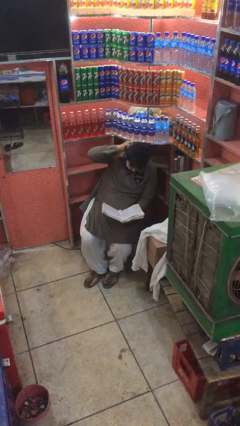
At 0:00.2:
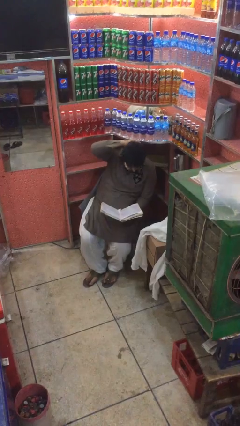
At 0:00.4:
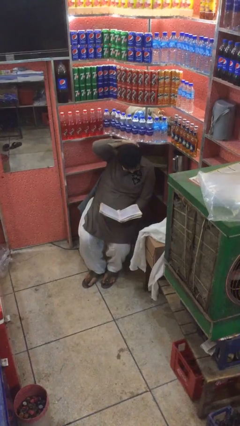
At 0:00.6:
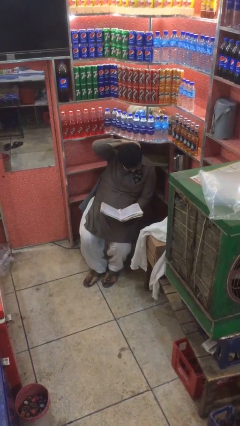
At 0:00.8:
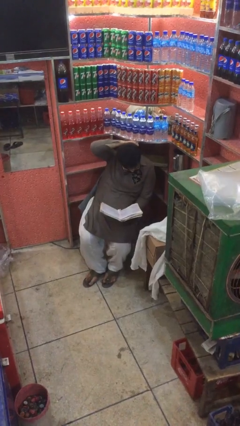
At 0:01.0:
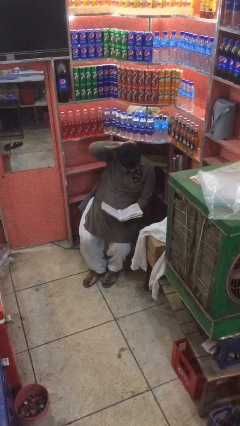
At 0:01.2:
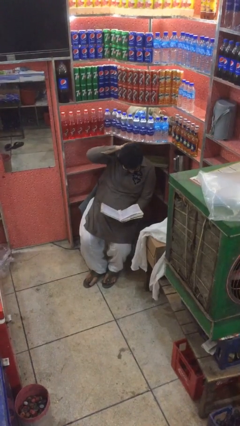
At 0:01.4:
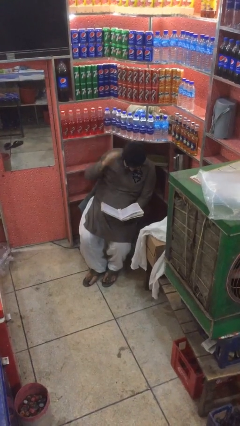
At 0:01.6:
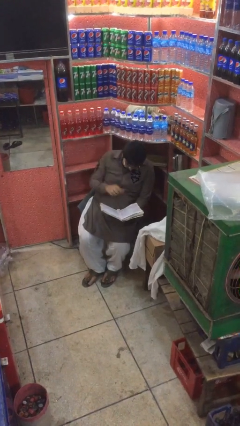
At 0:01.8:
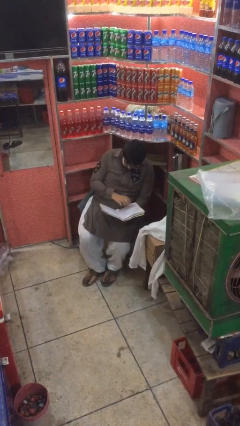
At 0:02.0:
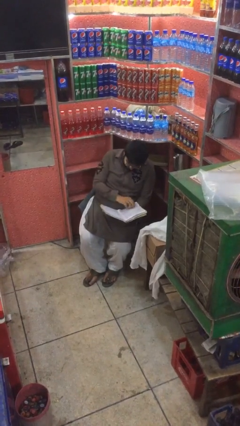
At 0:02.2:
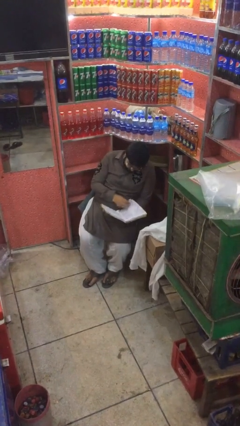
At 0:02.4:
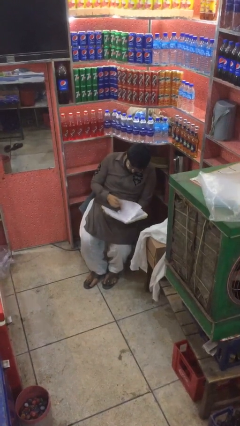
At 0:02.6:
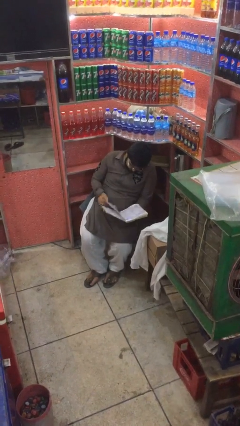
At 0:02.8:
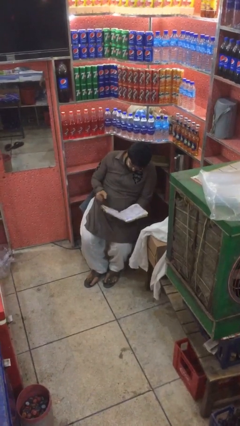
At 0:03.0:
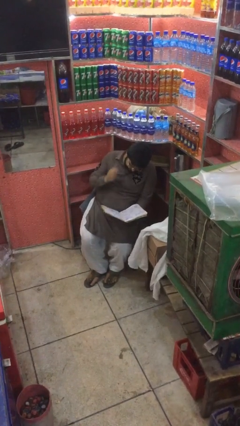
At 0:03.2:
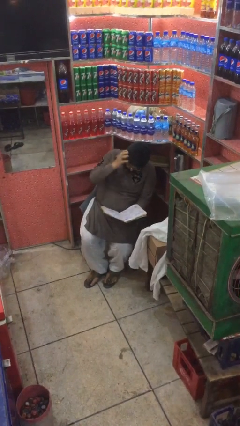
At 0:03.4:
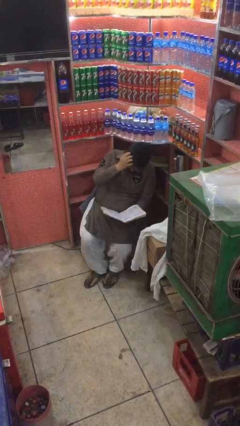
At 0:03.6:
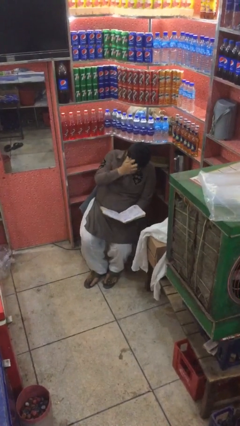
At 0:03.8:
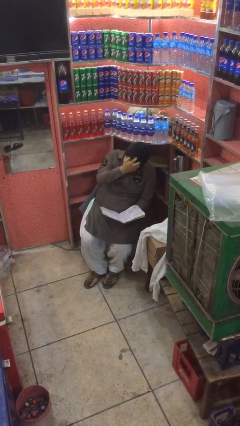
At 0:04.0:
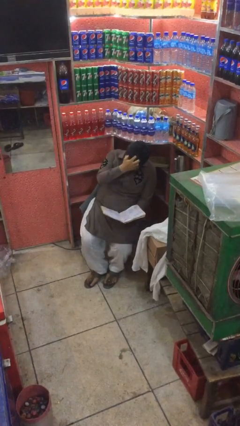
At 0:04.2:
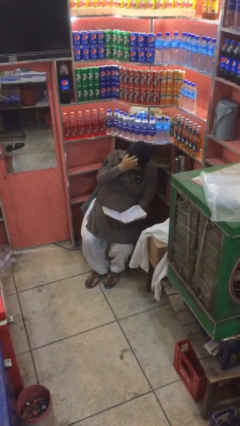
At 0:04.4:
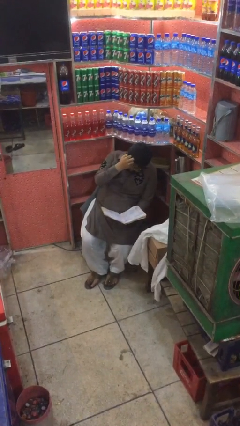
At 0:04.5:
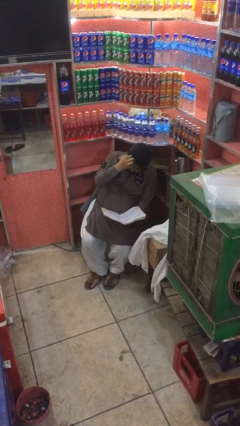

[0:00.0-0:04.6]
person reads document

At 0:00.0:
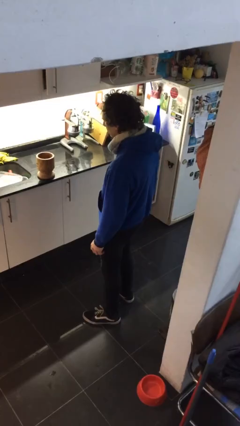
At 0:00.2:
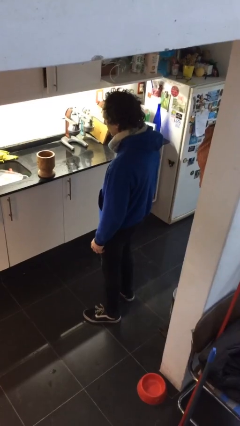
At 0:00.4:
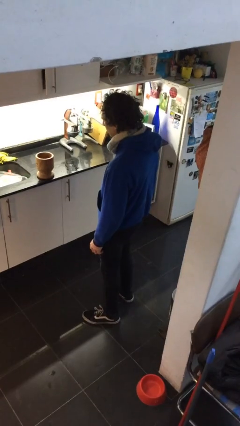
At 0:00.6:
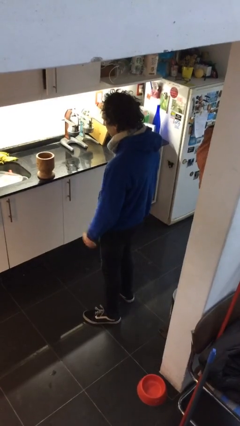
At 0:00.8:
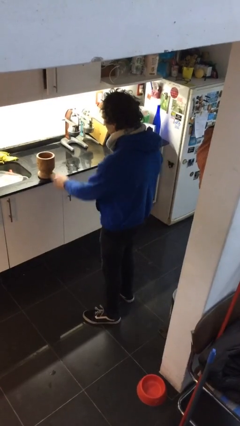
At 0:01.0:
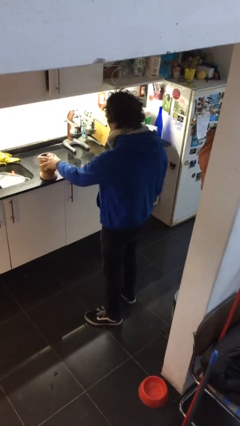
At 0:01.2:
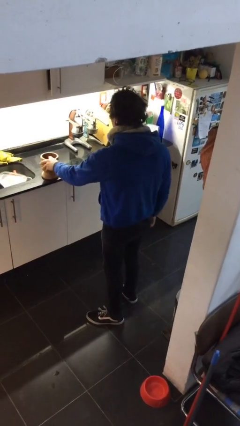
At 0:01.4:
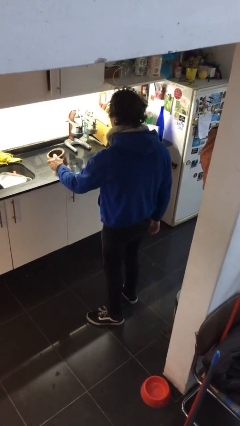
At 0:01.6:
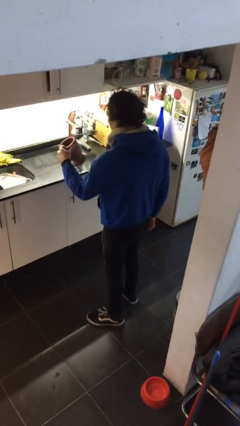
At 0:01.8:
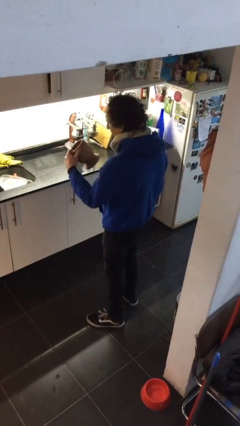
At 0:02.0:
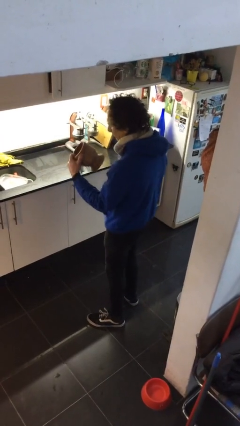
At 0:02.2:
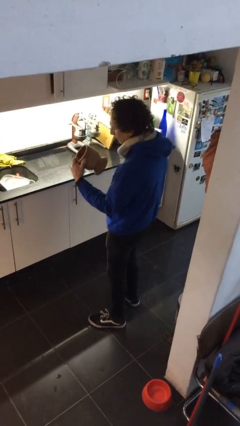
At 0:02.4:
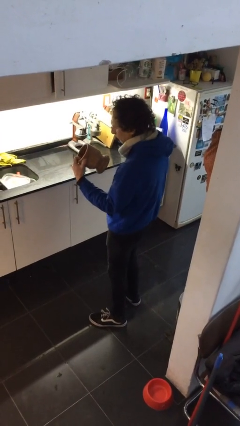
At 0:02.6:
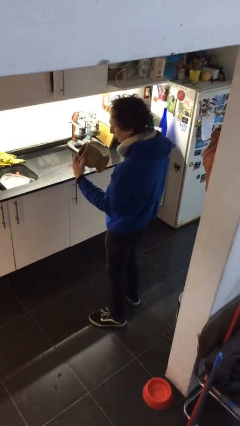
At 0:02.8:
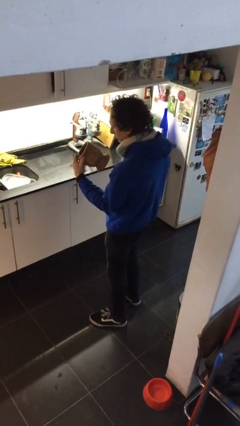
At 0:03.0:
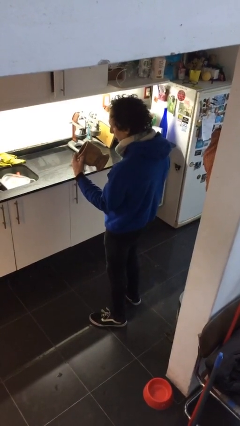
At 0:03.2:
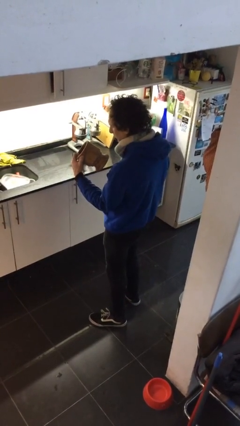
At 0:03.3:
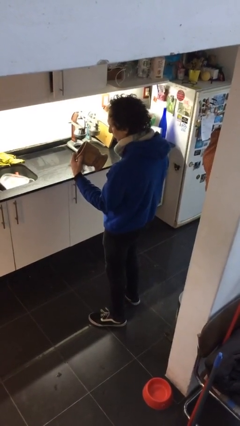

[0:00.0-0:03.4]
person picks up object from countertop

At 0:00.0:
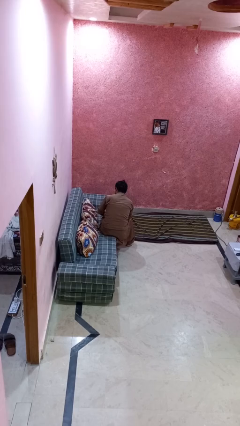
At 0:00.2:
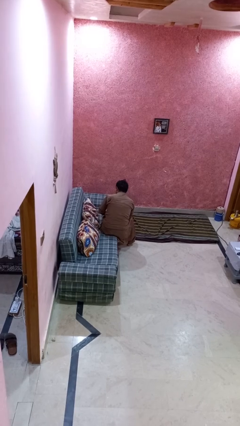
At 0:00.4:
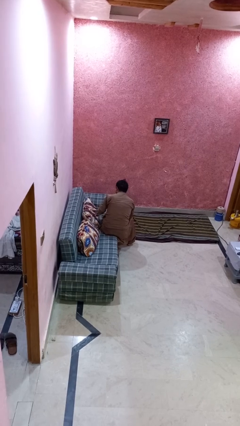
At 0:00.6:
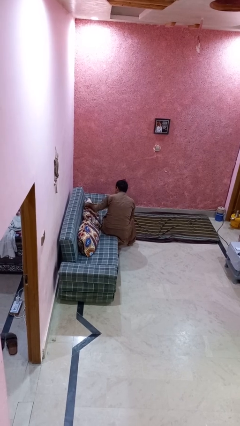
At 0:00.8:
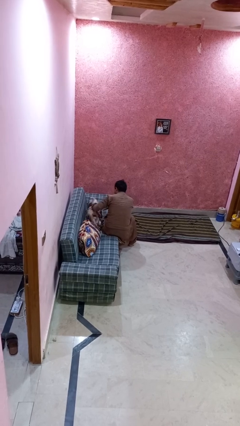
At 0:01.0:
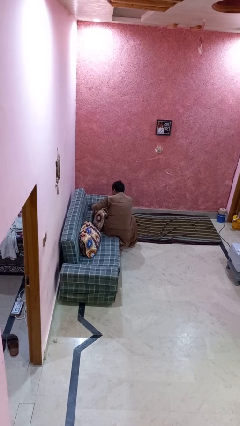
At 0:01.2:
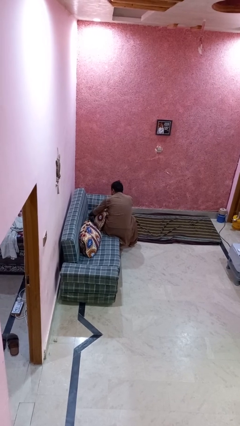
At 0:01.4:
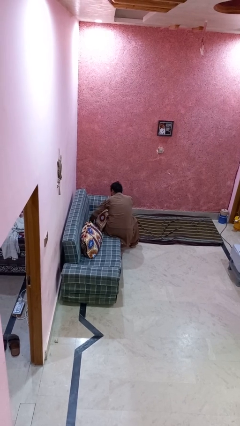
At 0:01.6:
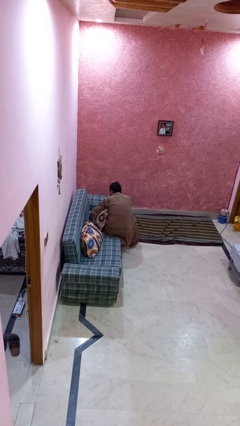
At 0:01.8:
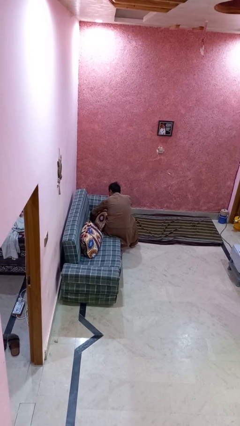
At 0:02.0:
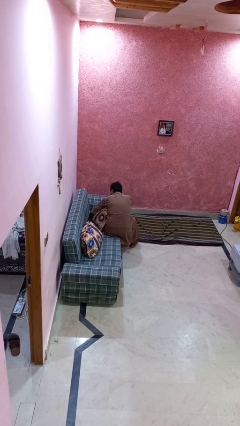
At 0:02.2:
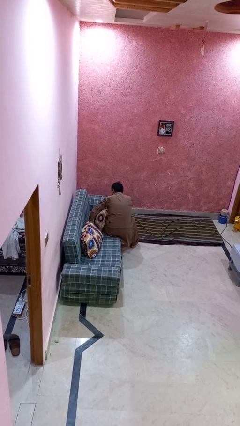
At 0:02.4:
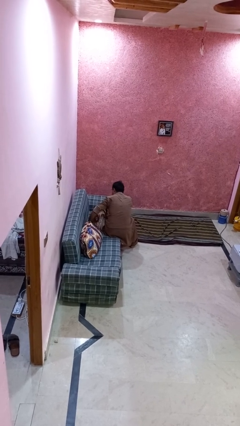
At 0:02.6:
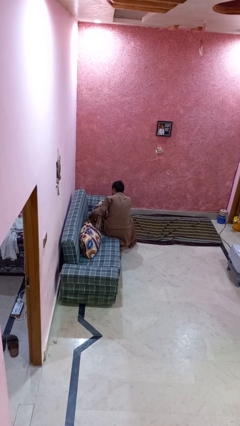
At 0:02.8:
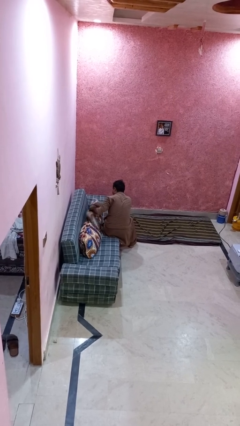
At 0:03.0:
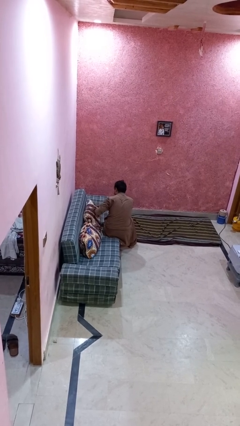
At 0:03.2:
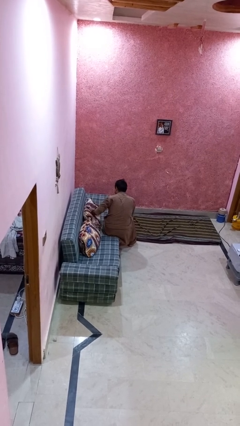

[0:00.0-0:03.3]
person searches in couch

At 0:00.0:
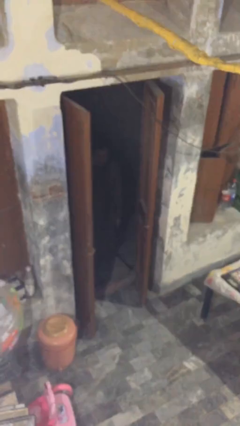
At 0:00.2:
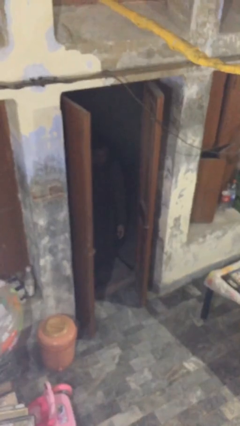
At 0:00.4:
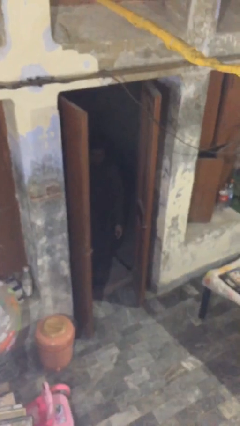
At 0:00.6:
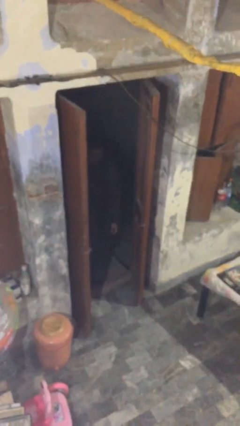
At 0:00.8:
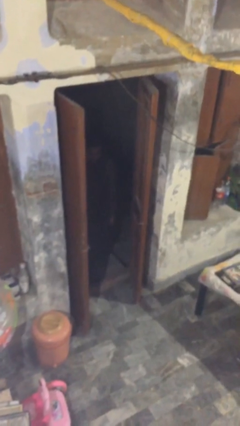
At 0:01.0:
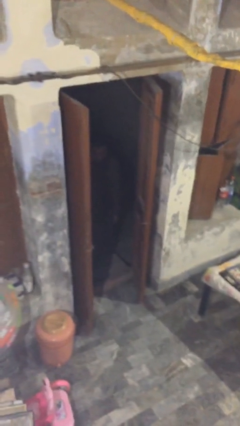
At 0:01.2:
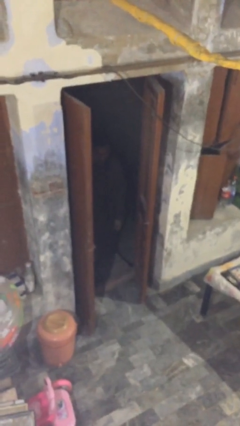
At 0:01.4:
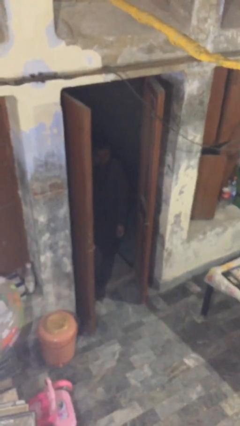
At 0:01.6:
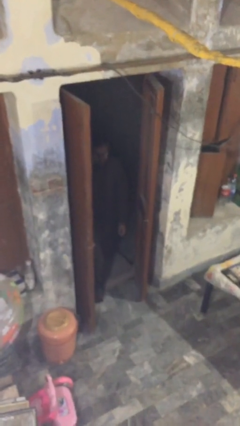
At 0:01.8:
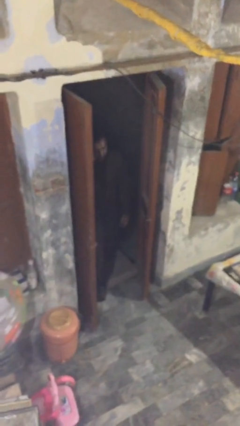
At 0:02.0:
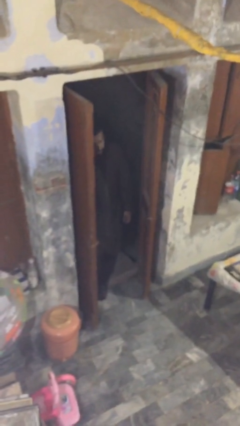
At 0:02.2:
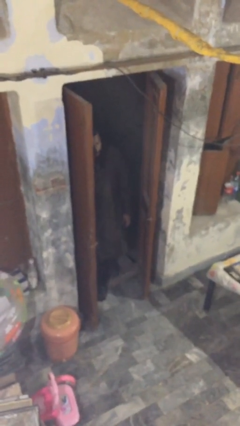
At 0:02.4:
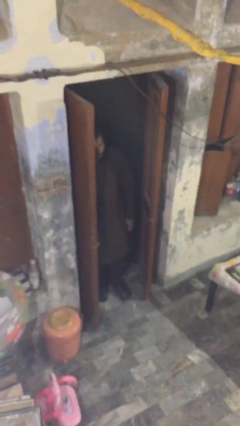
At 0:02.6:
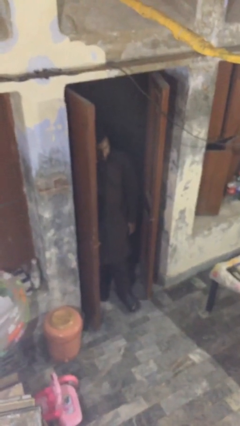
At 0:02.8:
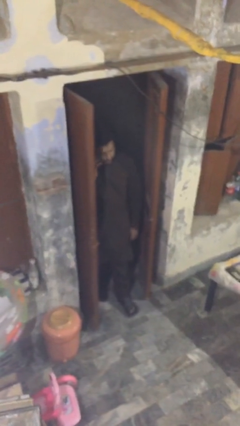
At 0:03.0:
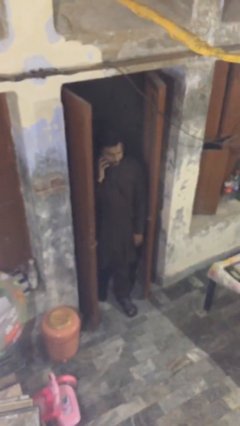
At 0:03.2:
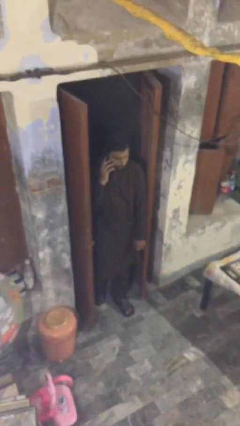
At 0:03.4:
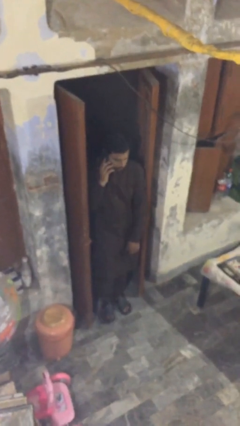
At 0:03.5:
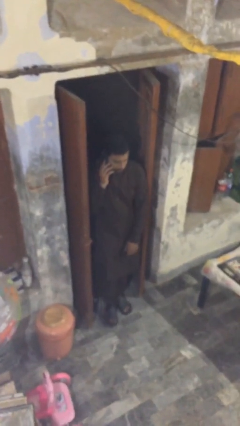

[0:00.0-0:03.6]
person enters scene through structure

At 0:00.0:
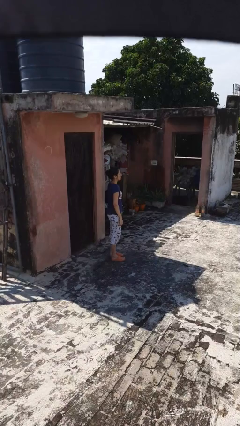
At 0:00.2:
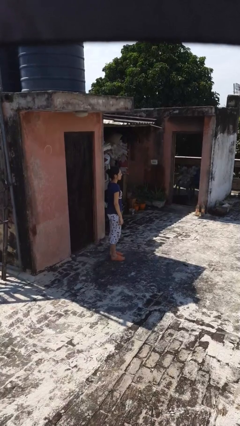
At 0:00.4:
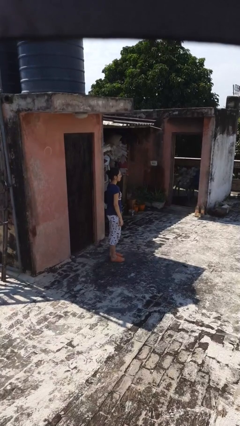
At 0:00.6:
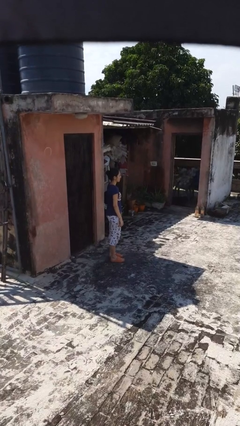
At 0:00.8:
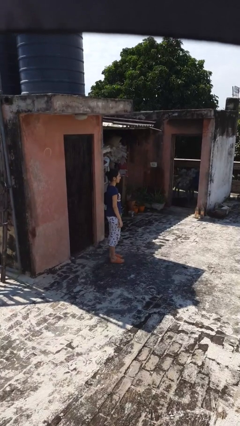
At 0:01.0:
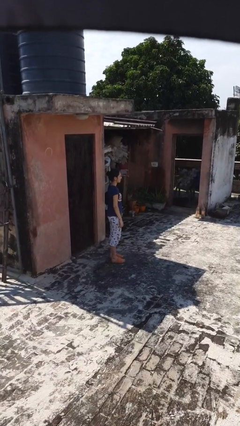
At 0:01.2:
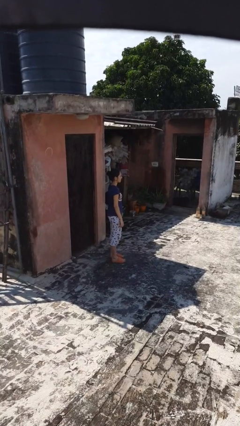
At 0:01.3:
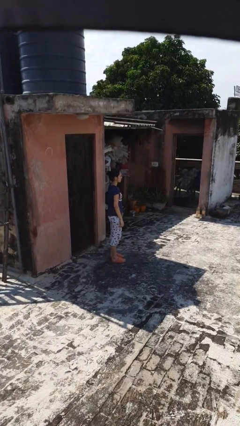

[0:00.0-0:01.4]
person gestures lower hand

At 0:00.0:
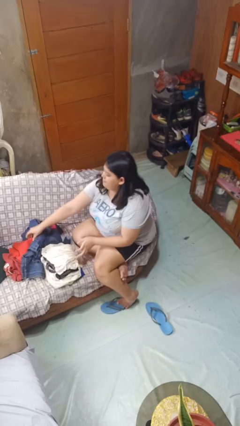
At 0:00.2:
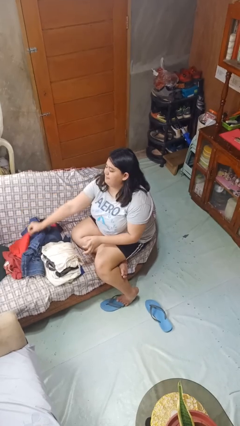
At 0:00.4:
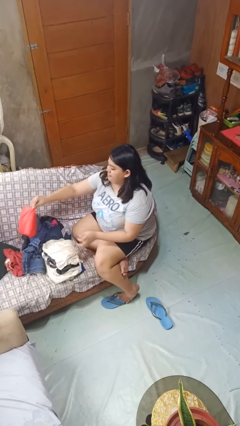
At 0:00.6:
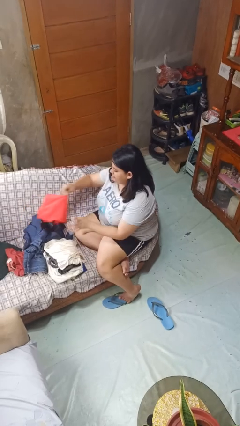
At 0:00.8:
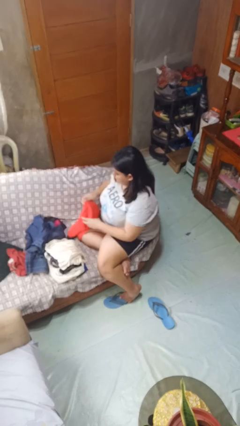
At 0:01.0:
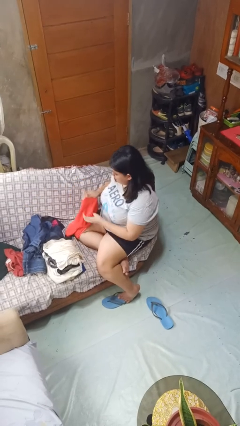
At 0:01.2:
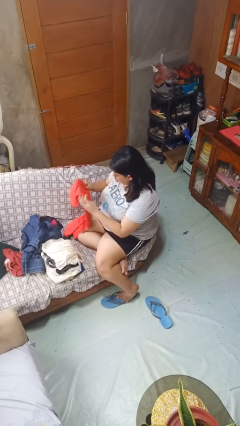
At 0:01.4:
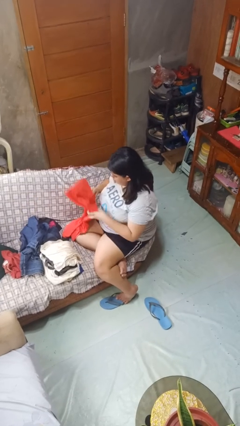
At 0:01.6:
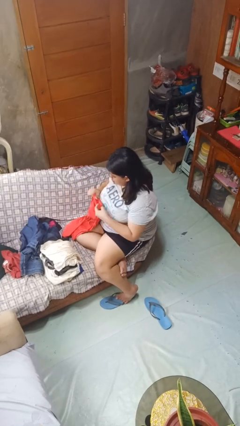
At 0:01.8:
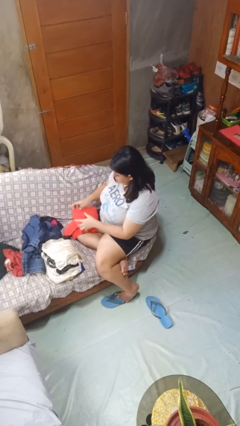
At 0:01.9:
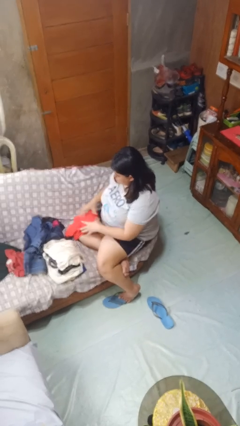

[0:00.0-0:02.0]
person folds shirt
